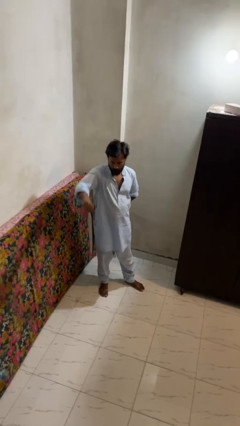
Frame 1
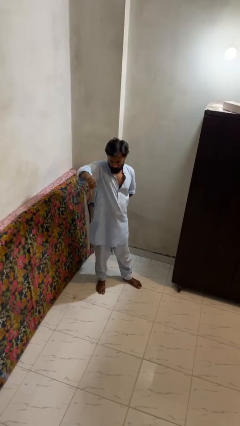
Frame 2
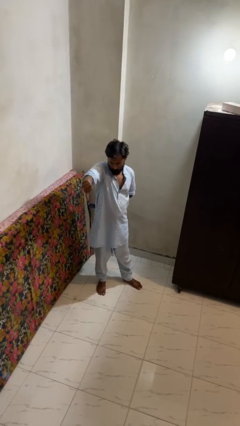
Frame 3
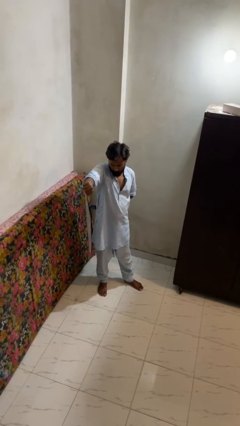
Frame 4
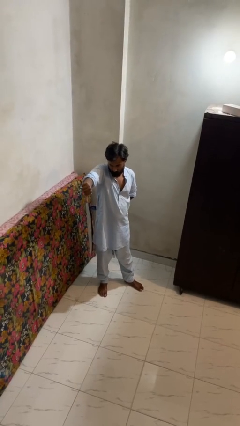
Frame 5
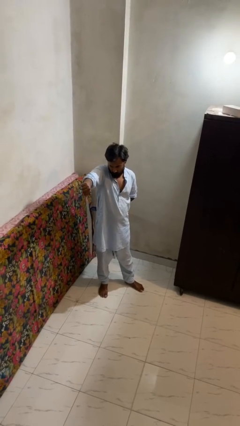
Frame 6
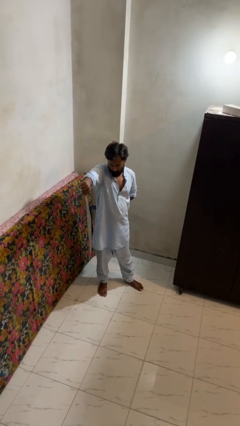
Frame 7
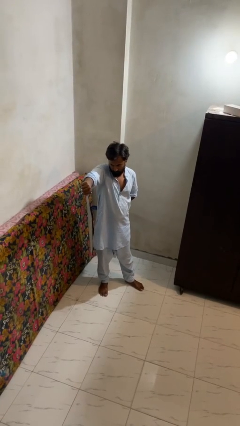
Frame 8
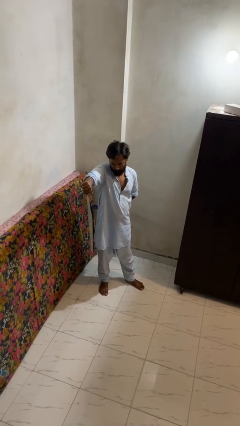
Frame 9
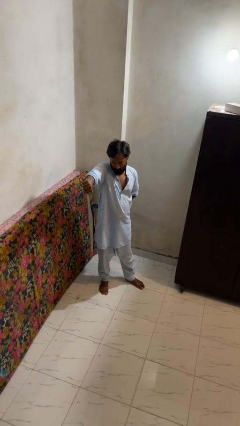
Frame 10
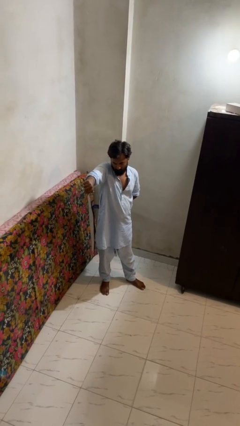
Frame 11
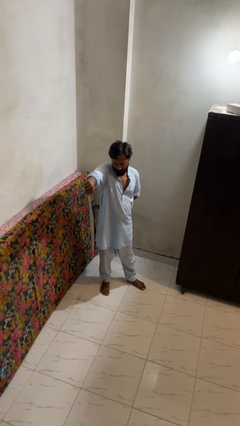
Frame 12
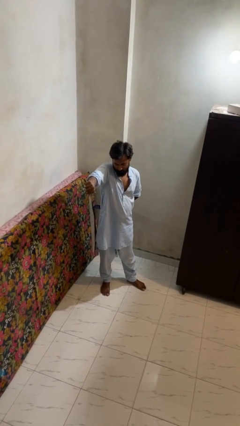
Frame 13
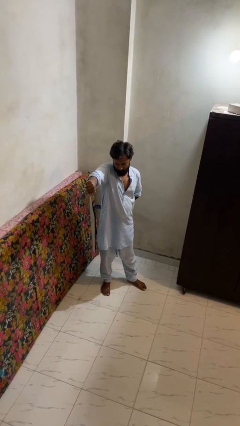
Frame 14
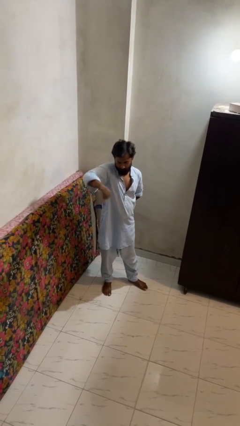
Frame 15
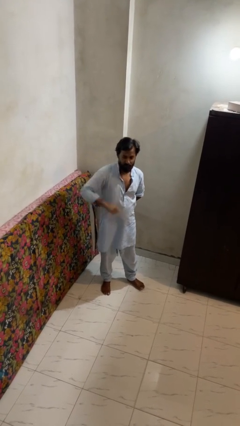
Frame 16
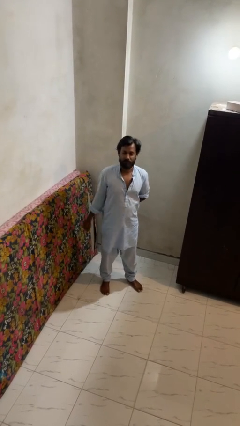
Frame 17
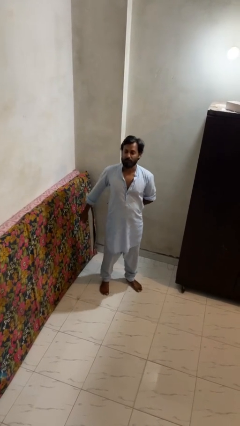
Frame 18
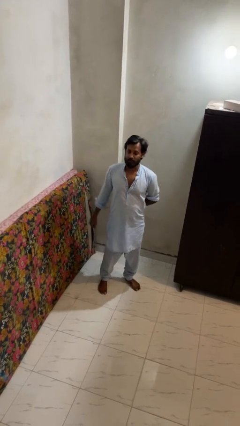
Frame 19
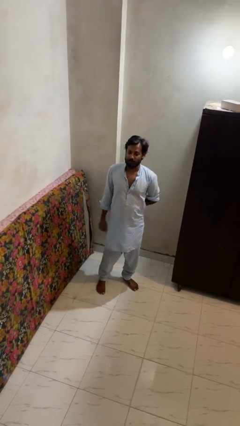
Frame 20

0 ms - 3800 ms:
person gestures thumbs down

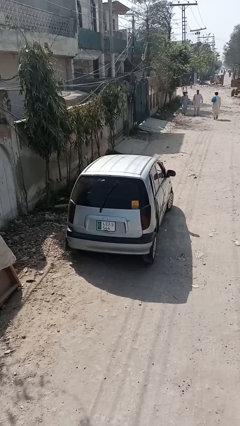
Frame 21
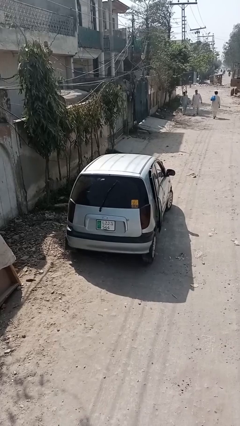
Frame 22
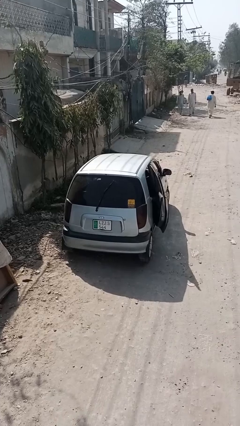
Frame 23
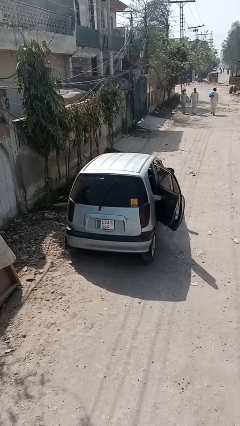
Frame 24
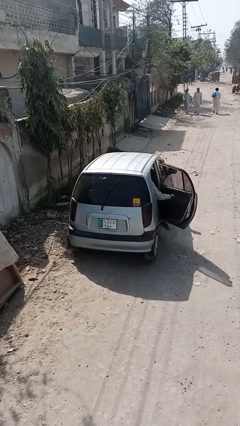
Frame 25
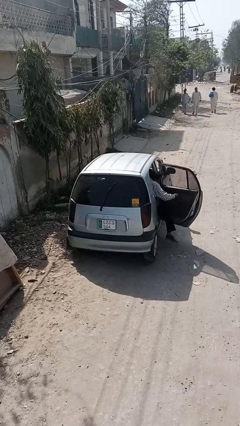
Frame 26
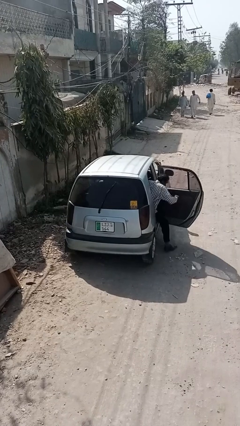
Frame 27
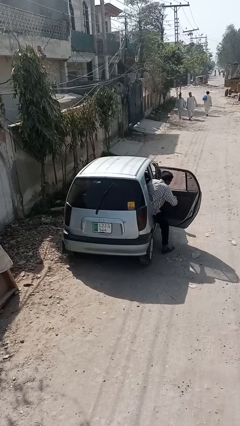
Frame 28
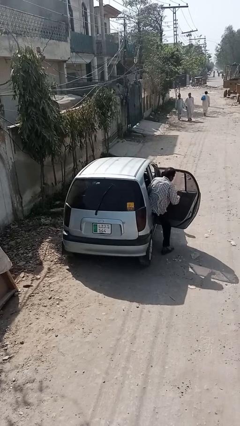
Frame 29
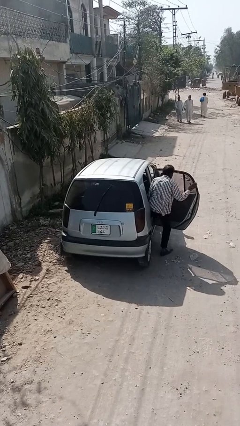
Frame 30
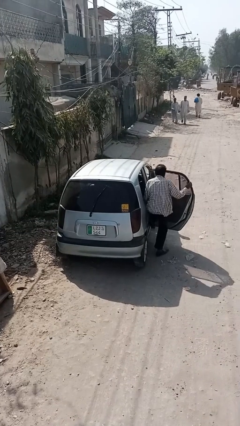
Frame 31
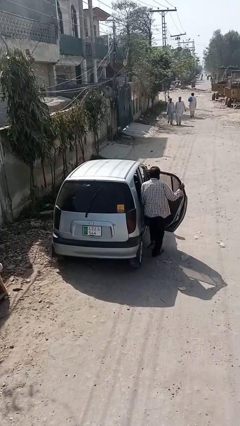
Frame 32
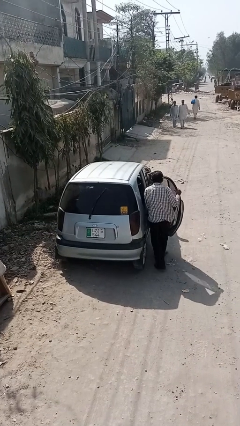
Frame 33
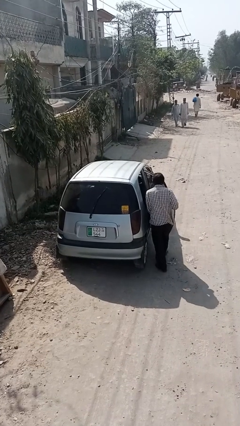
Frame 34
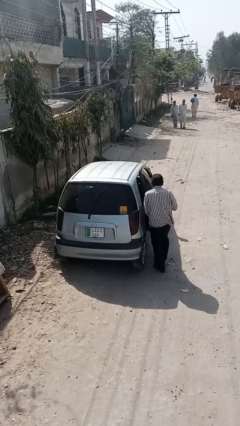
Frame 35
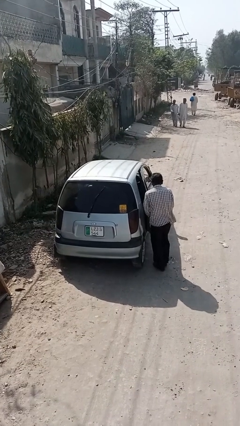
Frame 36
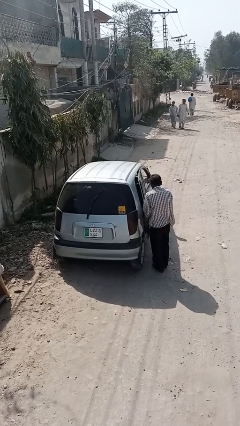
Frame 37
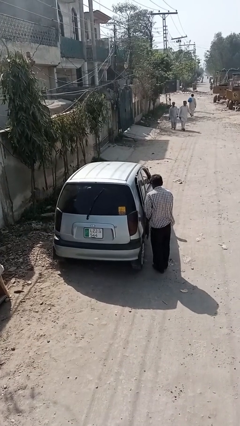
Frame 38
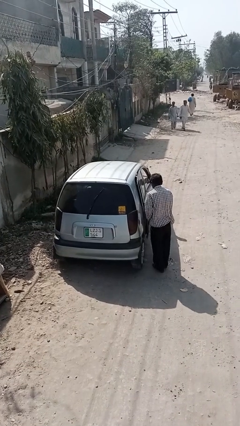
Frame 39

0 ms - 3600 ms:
car drops off person

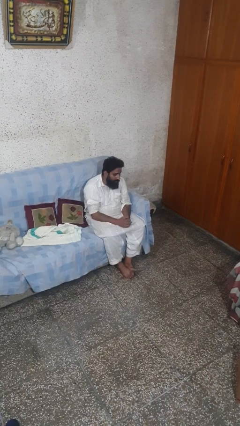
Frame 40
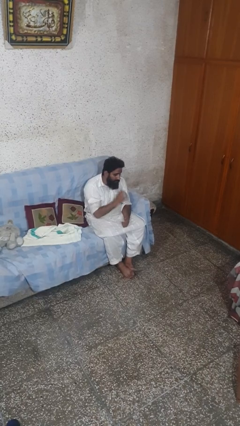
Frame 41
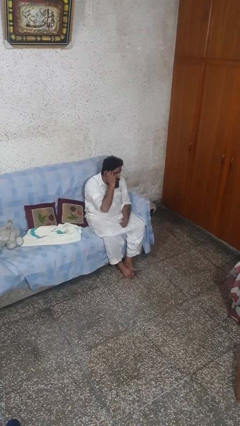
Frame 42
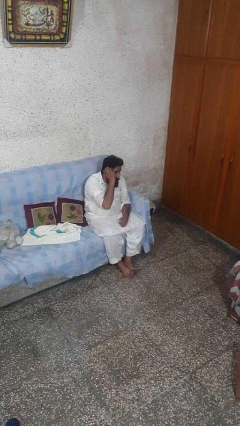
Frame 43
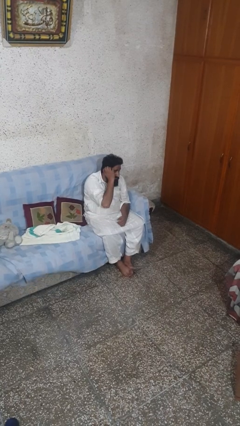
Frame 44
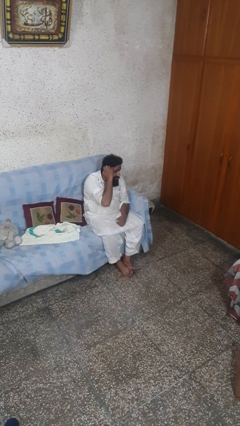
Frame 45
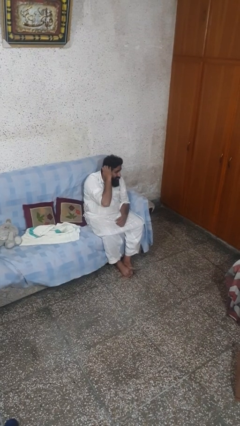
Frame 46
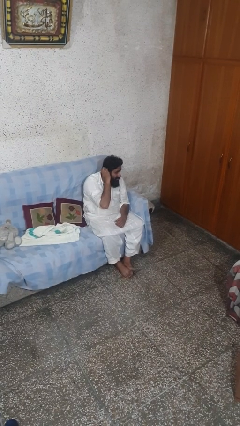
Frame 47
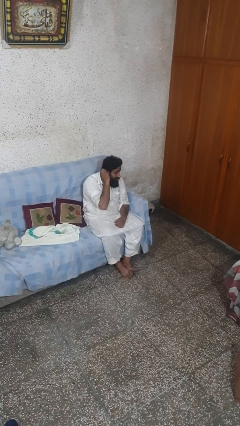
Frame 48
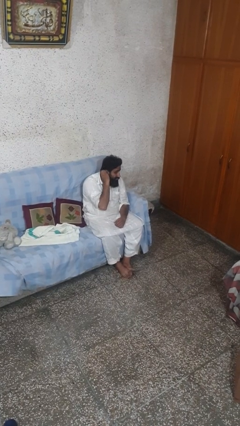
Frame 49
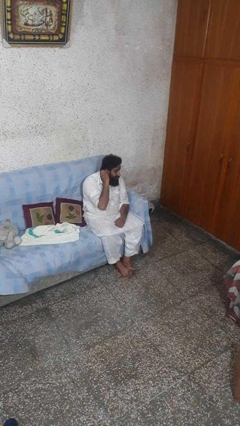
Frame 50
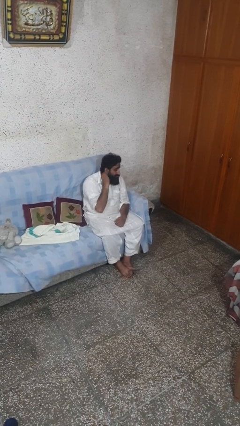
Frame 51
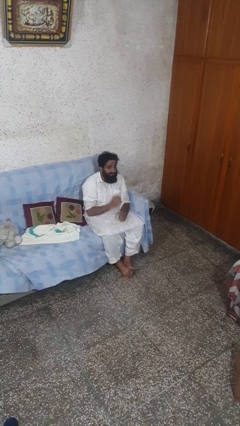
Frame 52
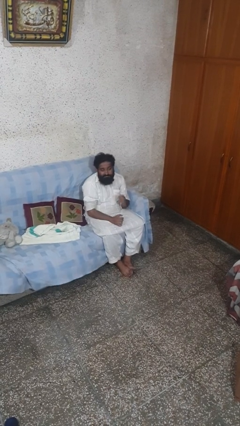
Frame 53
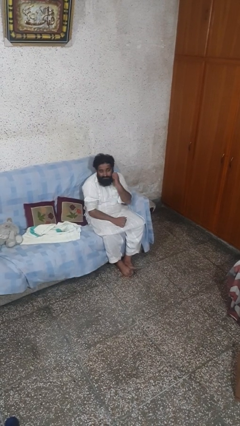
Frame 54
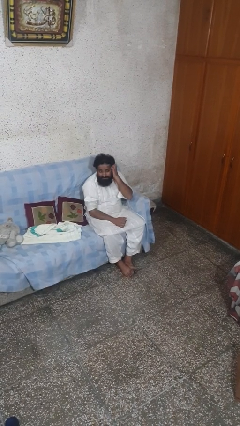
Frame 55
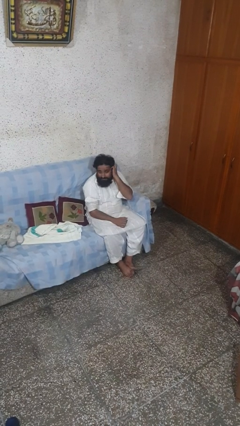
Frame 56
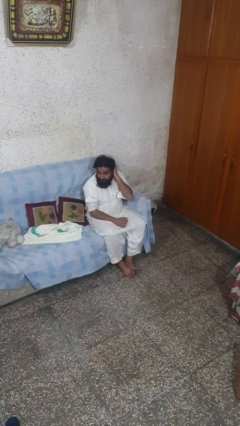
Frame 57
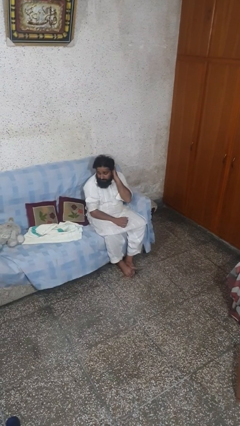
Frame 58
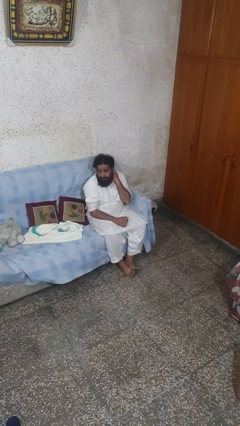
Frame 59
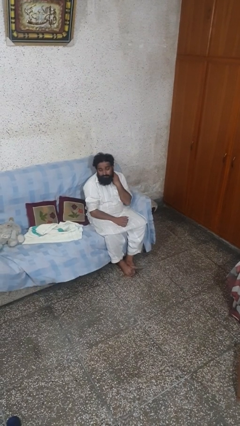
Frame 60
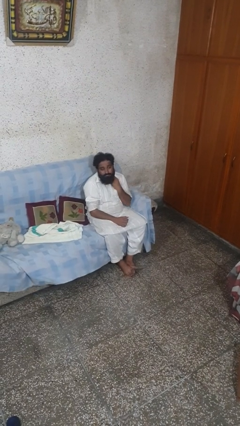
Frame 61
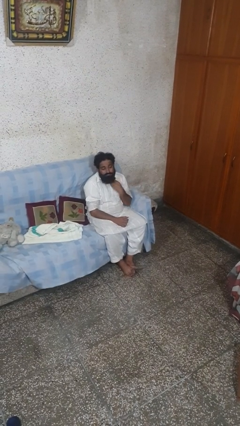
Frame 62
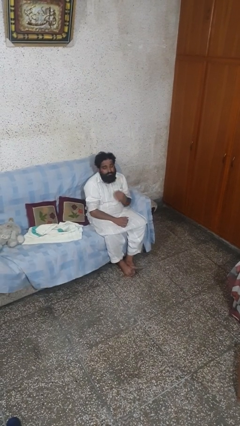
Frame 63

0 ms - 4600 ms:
person strokes hair

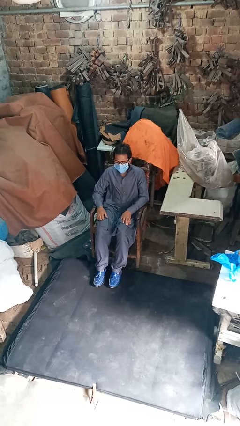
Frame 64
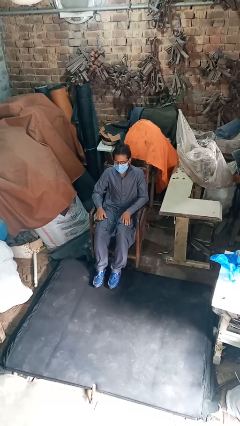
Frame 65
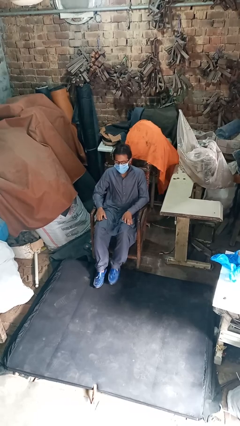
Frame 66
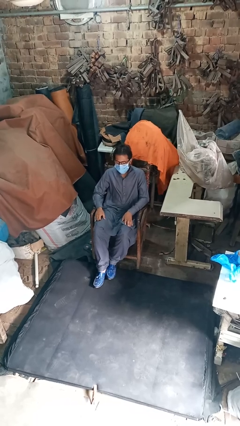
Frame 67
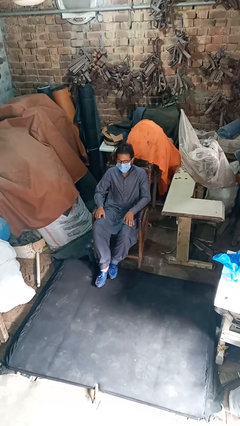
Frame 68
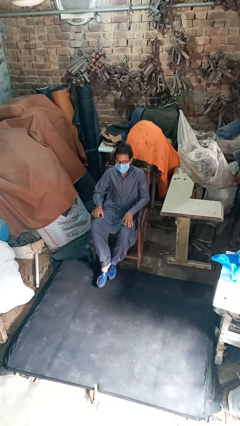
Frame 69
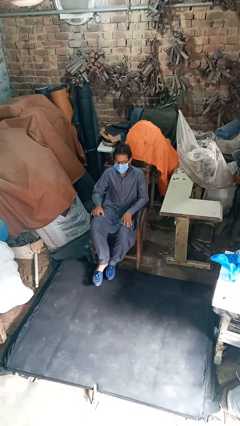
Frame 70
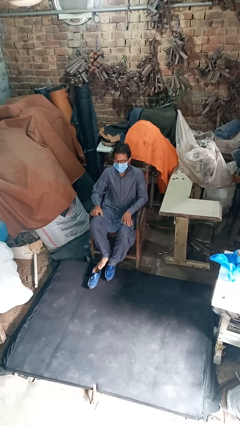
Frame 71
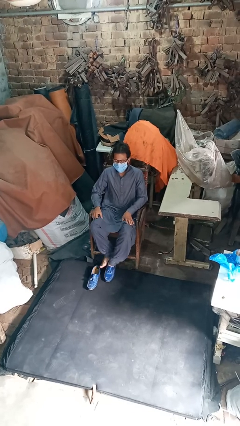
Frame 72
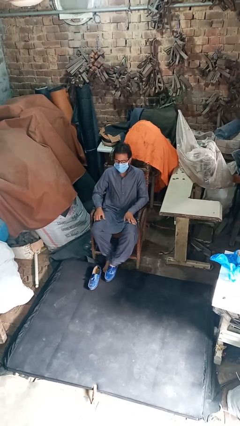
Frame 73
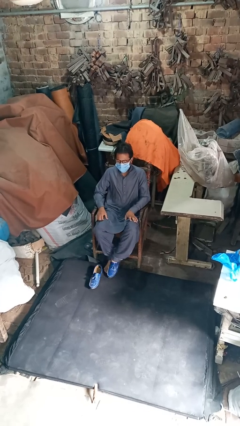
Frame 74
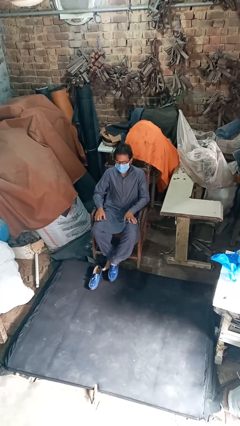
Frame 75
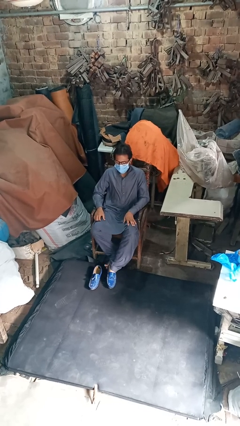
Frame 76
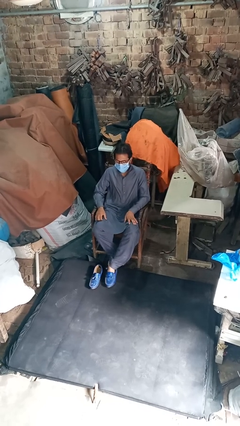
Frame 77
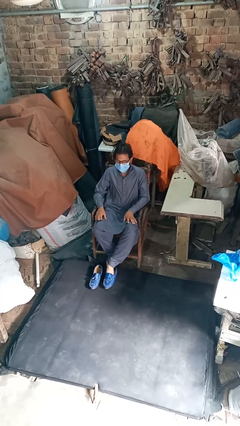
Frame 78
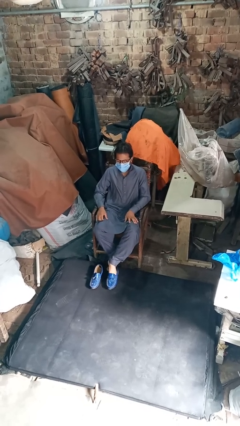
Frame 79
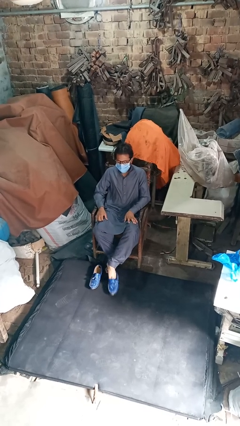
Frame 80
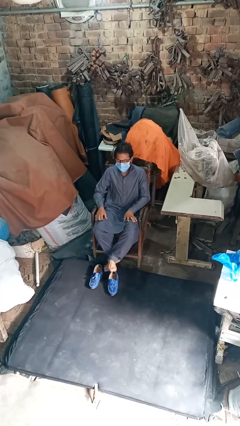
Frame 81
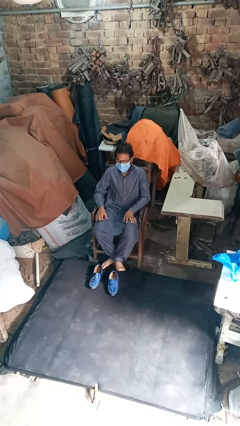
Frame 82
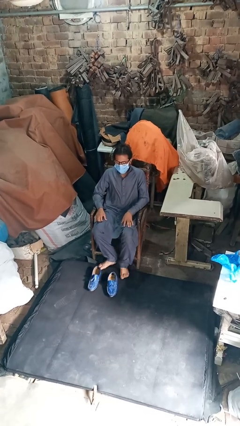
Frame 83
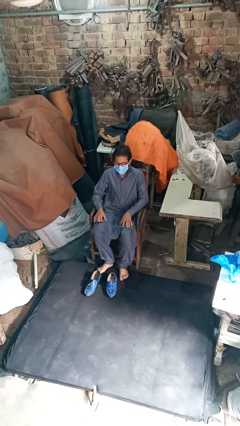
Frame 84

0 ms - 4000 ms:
person takes off shoes

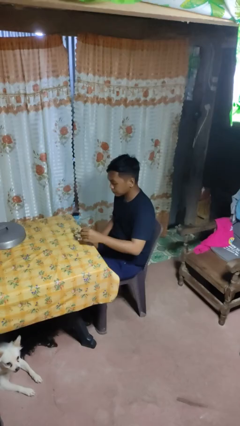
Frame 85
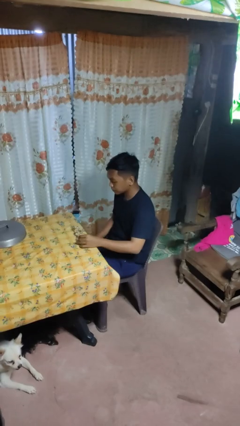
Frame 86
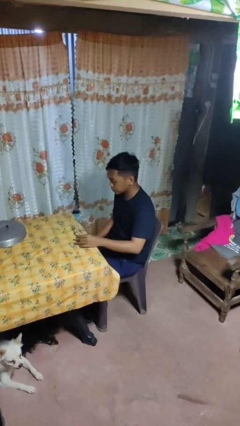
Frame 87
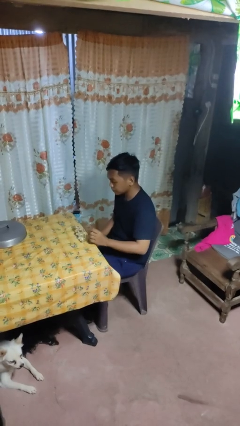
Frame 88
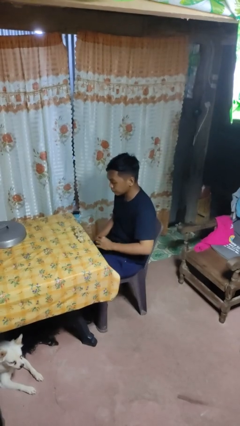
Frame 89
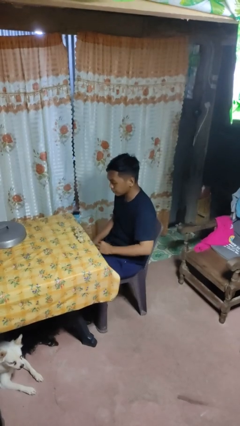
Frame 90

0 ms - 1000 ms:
person puts down object on table

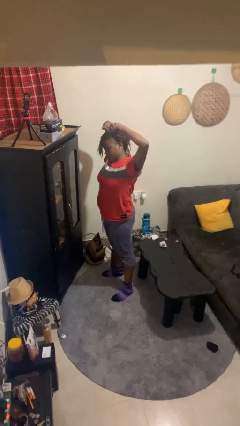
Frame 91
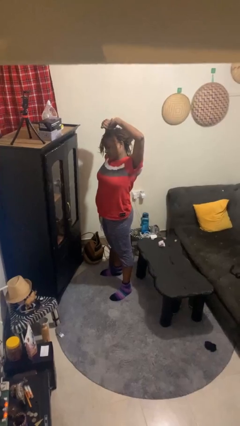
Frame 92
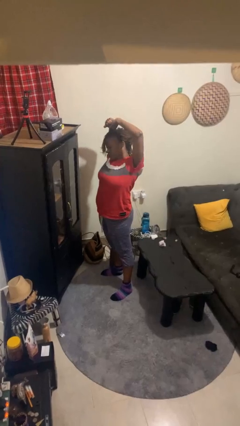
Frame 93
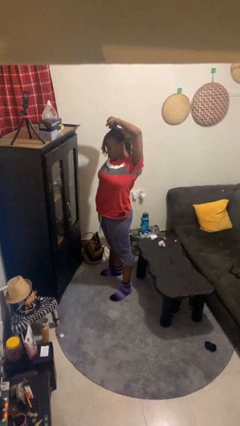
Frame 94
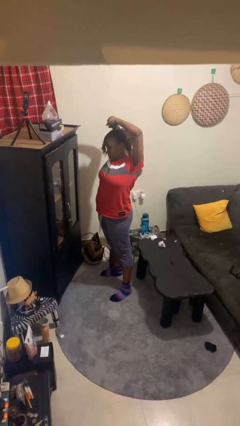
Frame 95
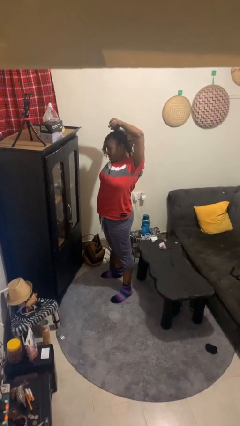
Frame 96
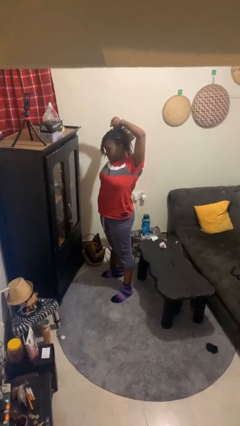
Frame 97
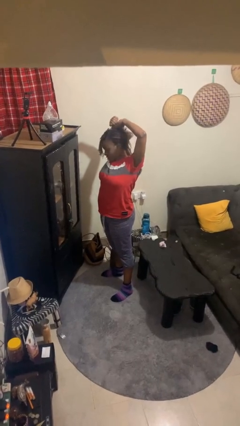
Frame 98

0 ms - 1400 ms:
person stretches arms over head
